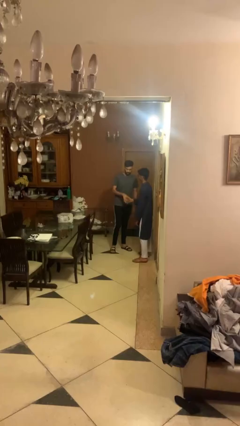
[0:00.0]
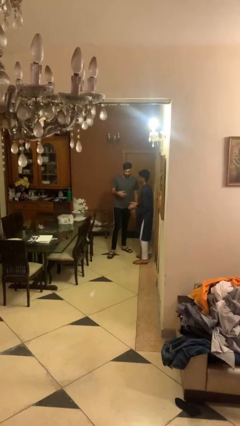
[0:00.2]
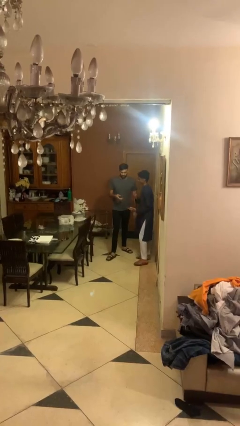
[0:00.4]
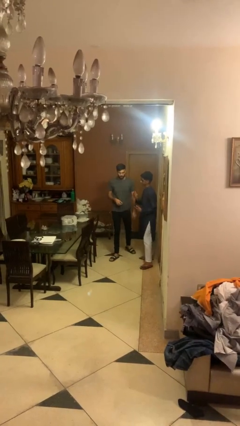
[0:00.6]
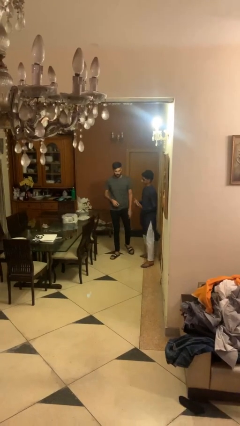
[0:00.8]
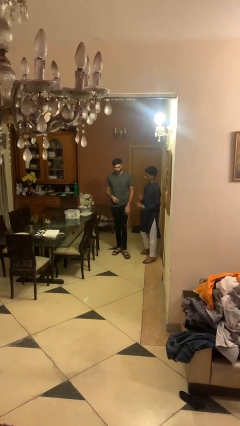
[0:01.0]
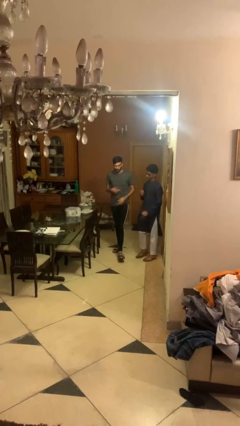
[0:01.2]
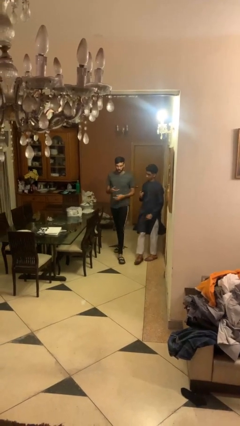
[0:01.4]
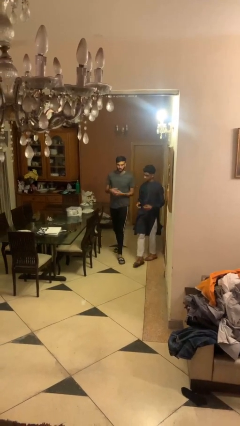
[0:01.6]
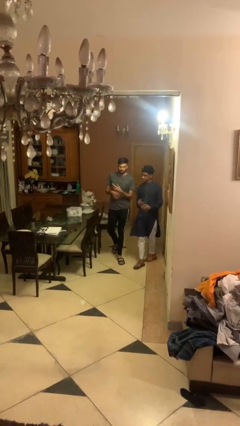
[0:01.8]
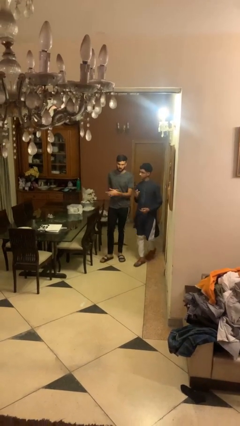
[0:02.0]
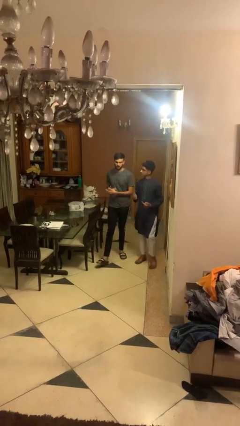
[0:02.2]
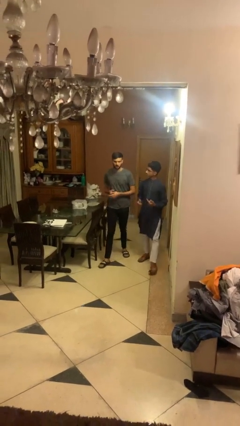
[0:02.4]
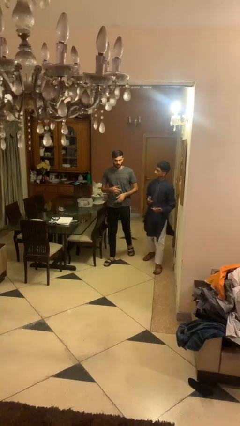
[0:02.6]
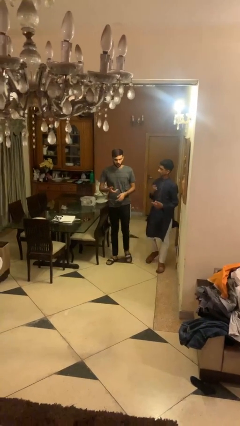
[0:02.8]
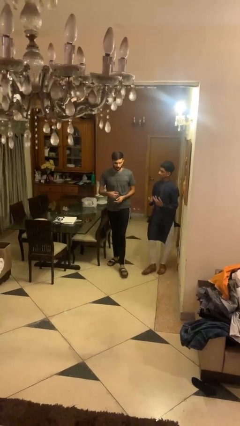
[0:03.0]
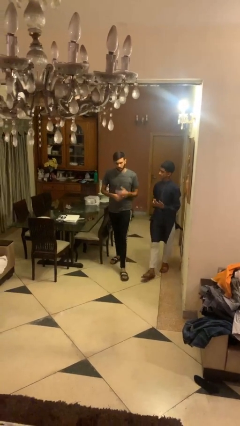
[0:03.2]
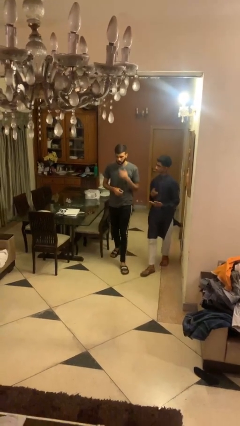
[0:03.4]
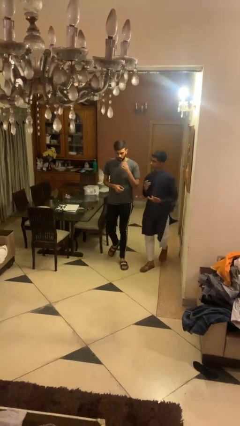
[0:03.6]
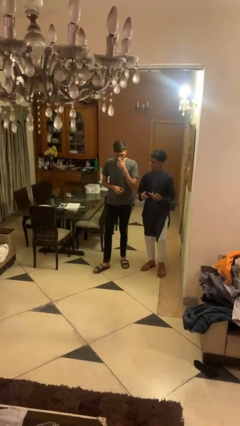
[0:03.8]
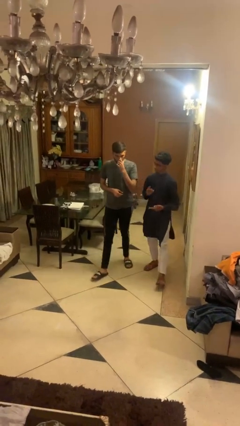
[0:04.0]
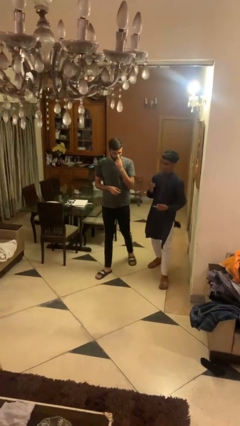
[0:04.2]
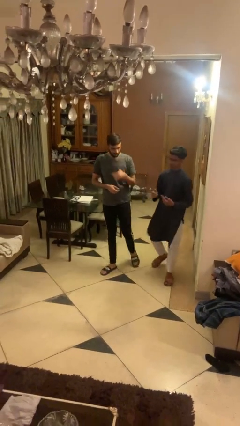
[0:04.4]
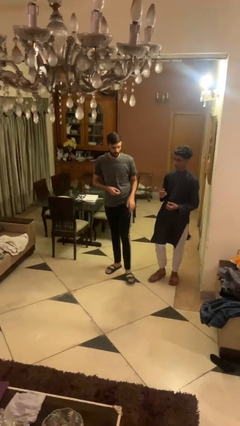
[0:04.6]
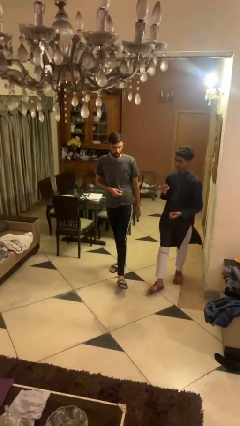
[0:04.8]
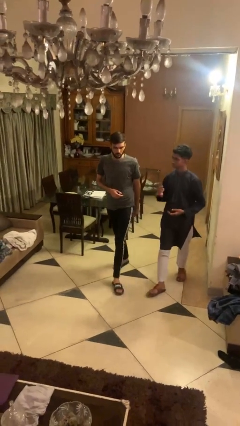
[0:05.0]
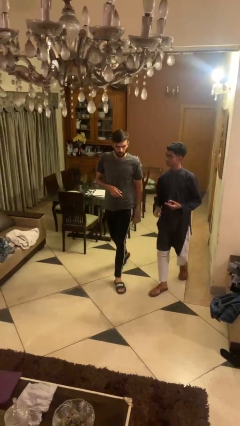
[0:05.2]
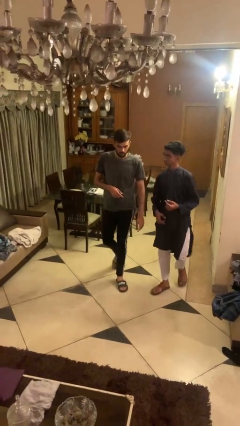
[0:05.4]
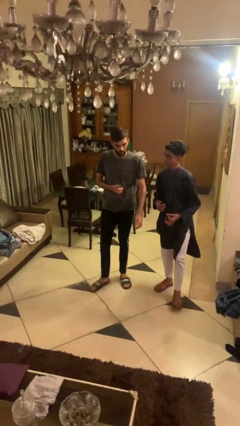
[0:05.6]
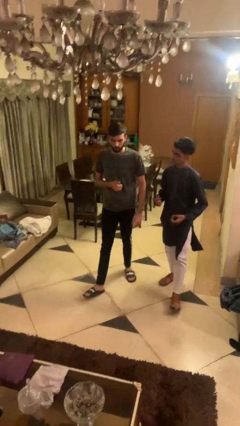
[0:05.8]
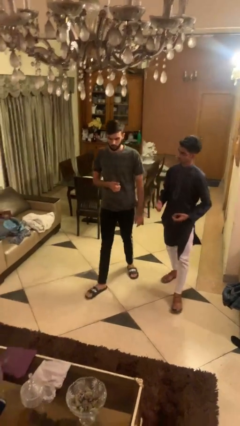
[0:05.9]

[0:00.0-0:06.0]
person talks to person

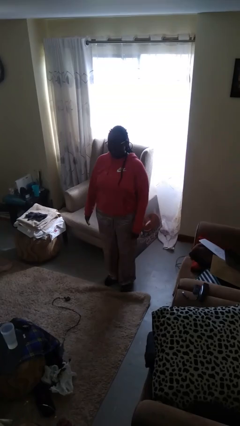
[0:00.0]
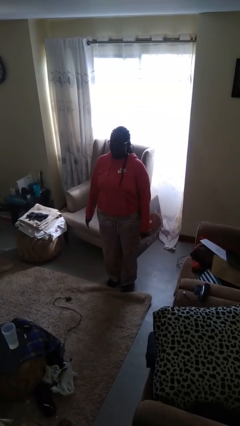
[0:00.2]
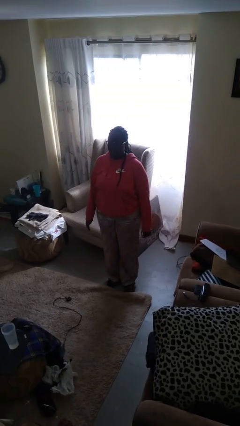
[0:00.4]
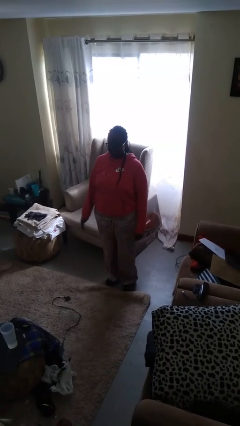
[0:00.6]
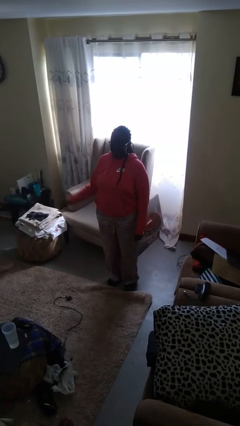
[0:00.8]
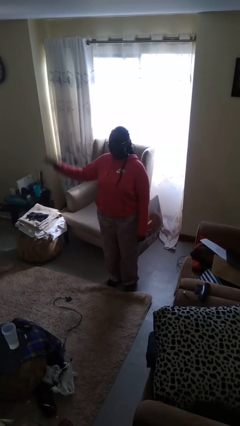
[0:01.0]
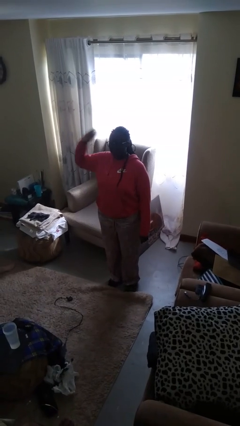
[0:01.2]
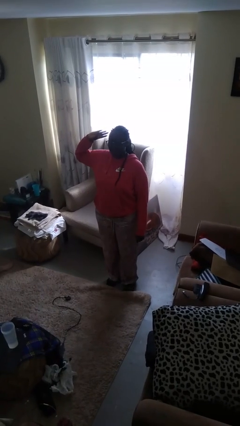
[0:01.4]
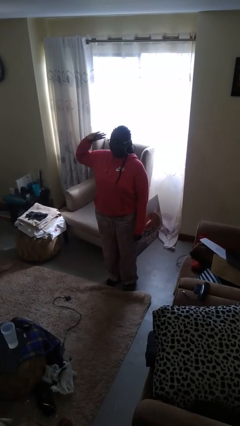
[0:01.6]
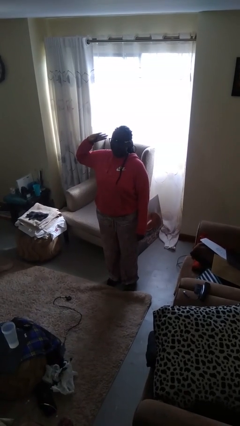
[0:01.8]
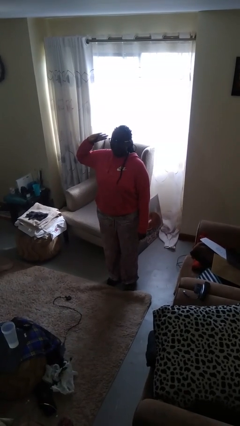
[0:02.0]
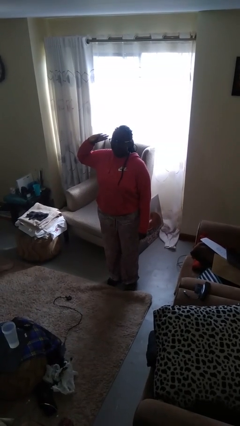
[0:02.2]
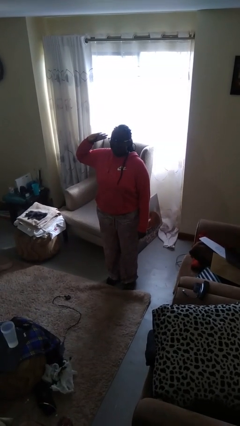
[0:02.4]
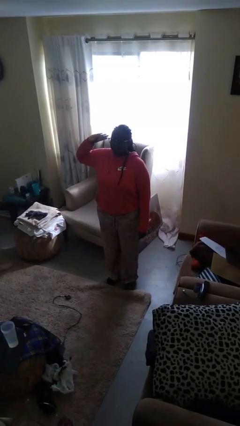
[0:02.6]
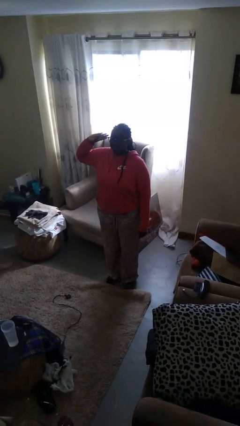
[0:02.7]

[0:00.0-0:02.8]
person salutes

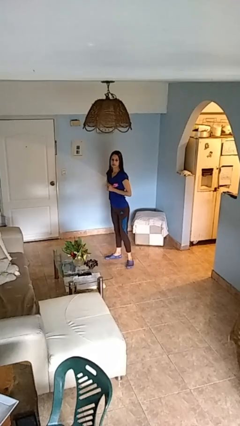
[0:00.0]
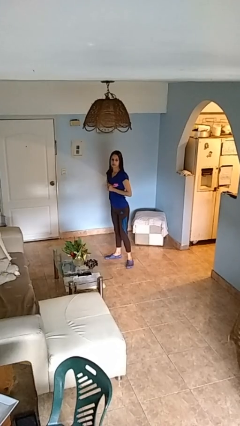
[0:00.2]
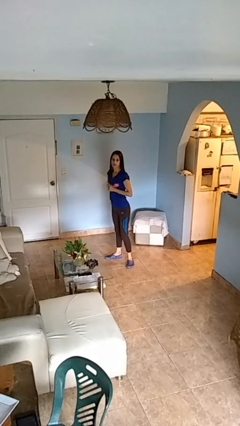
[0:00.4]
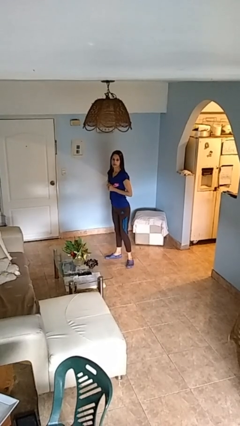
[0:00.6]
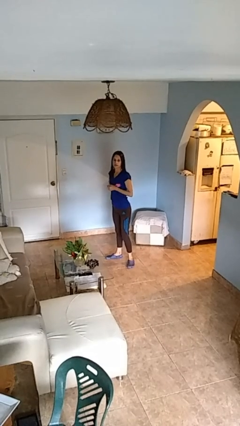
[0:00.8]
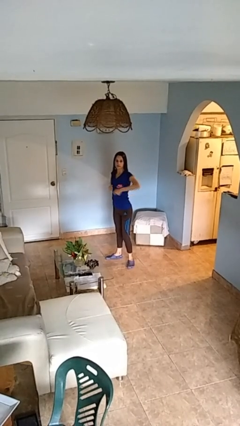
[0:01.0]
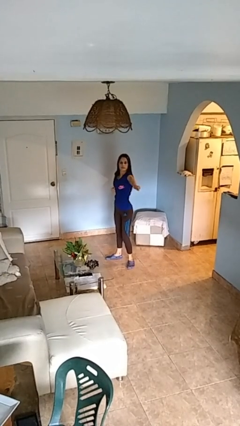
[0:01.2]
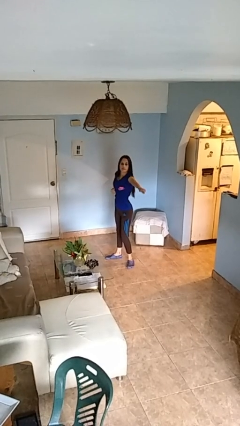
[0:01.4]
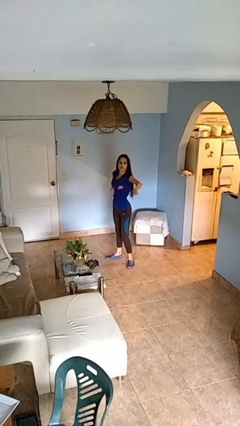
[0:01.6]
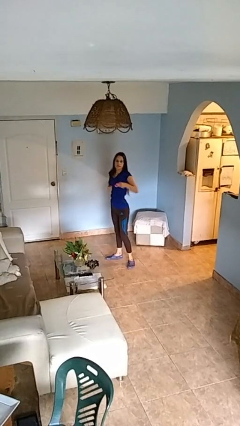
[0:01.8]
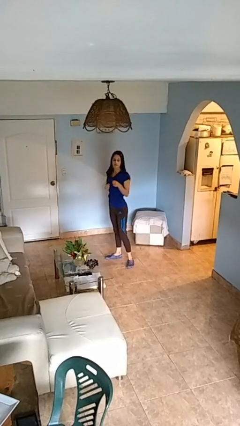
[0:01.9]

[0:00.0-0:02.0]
person karate chop

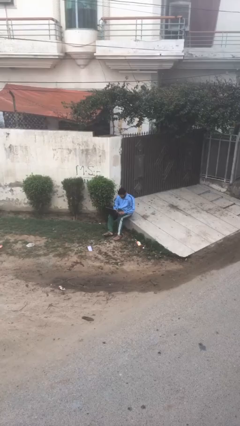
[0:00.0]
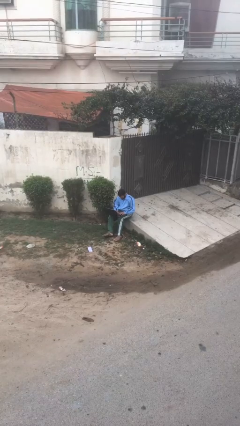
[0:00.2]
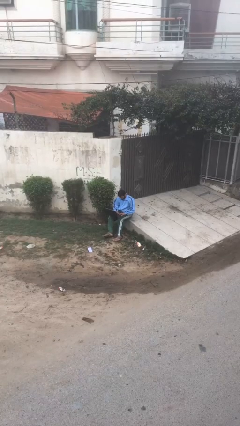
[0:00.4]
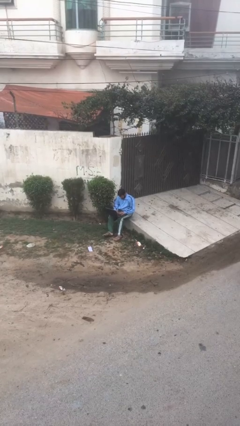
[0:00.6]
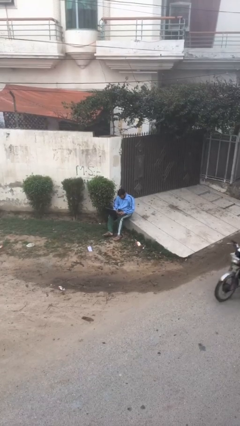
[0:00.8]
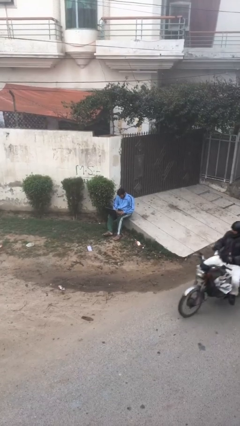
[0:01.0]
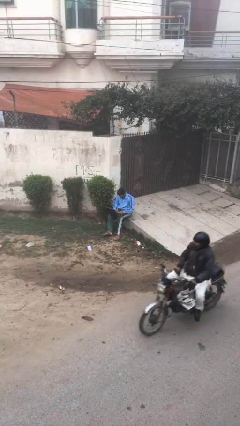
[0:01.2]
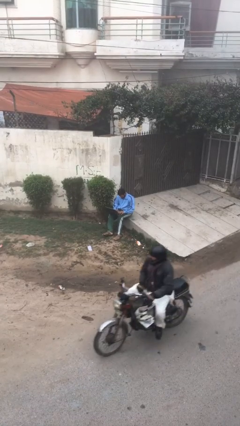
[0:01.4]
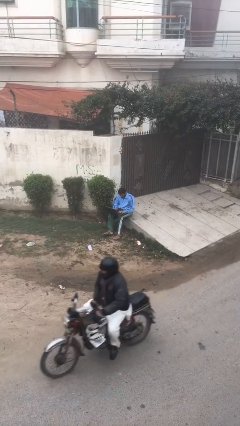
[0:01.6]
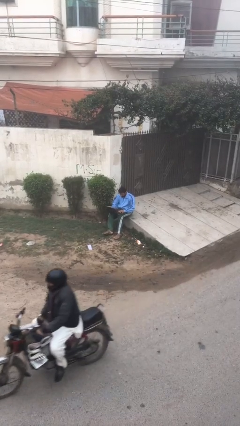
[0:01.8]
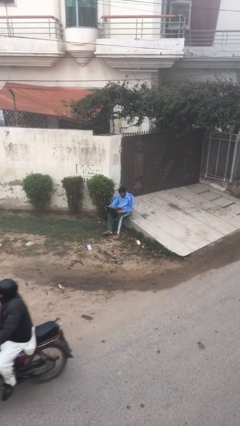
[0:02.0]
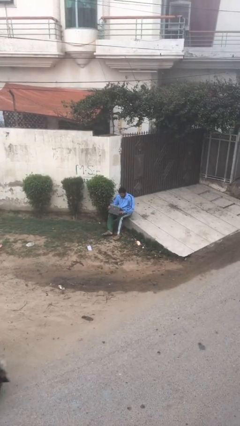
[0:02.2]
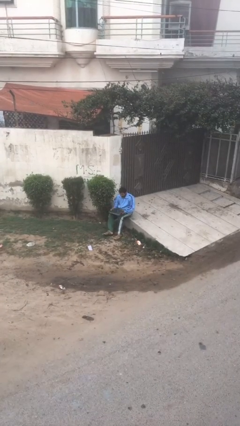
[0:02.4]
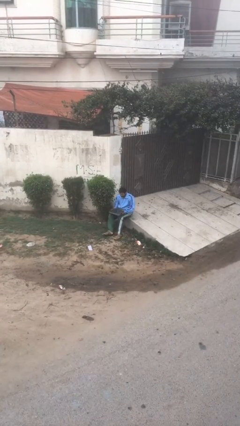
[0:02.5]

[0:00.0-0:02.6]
person interacts with laptop

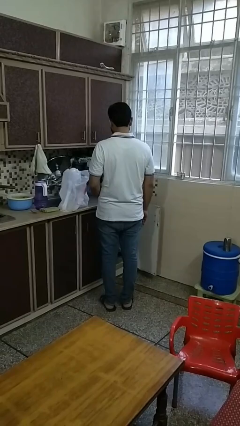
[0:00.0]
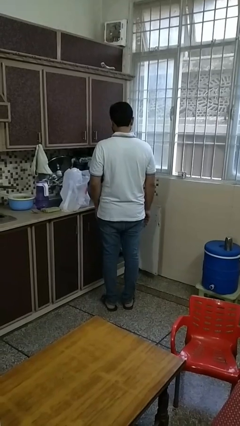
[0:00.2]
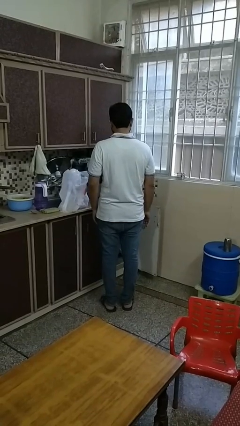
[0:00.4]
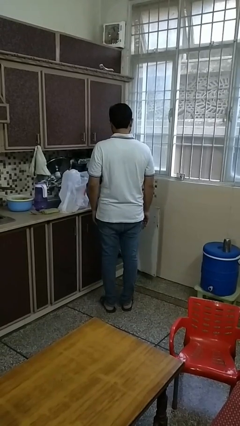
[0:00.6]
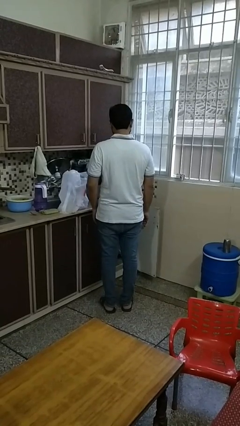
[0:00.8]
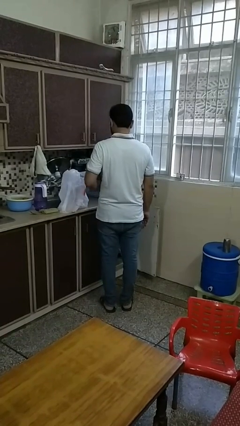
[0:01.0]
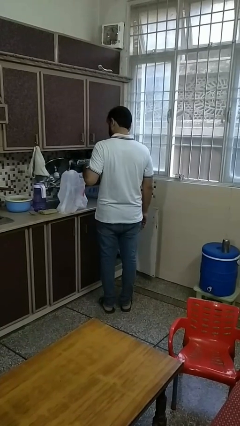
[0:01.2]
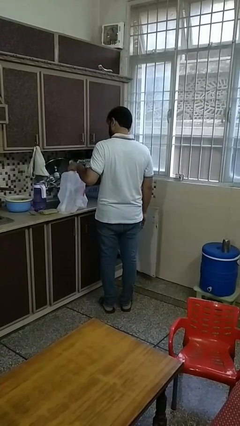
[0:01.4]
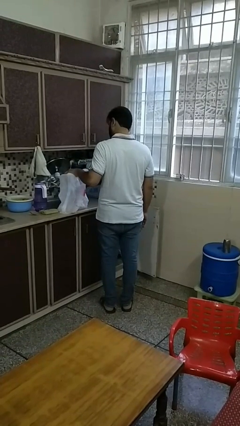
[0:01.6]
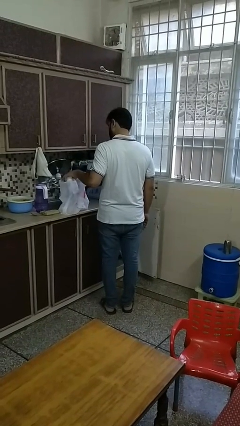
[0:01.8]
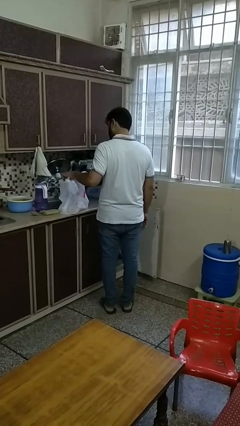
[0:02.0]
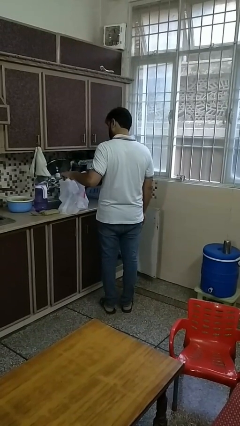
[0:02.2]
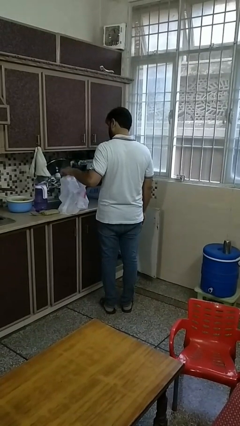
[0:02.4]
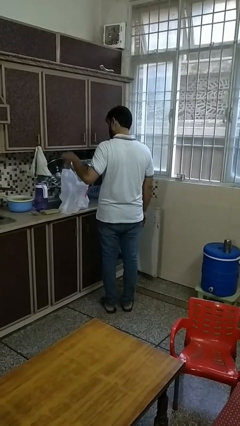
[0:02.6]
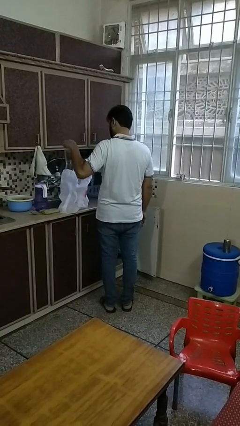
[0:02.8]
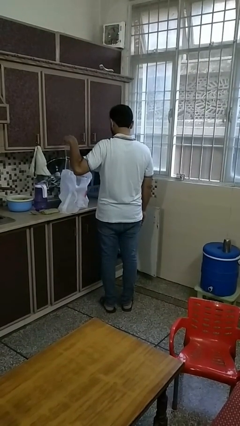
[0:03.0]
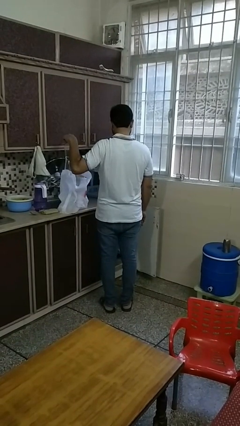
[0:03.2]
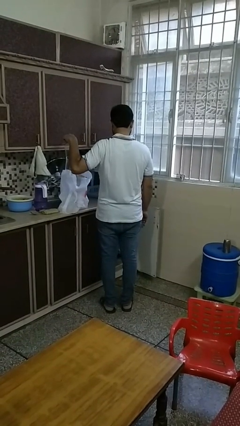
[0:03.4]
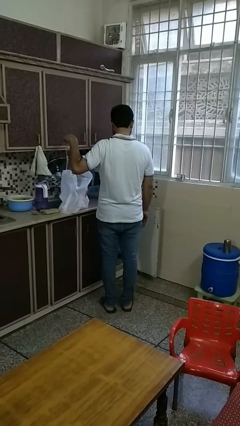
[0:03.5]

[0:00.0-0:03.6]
person takes object from bag

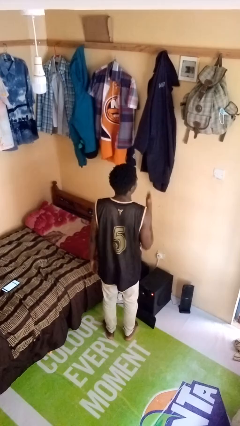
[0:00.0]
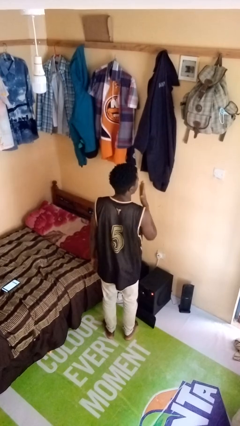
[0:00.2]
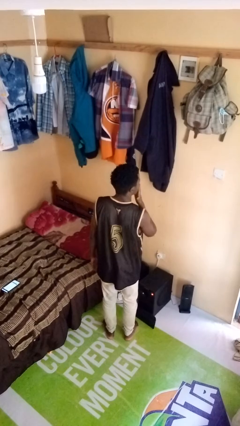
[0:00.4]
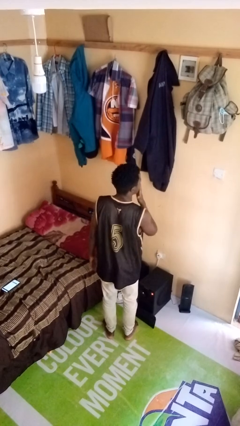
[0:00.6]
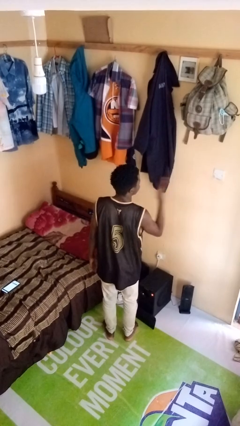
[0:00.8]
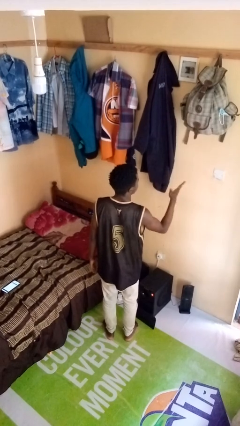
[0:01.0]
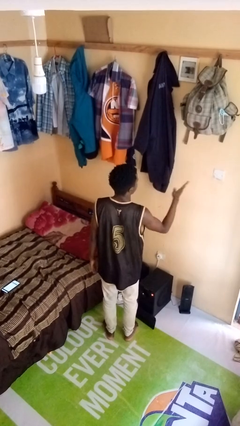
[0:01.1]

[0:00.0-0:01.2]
person gestures blow kiss
